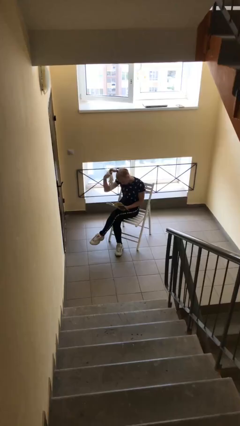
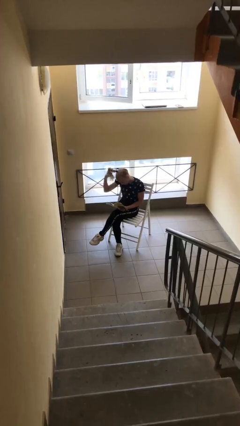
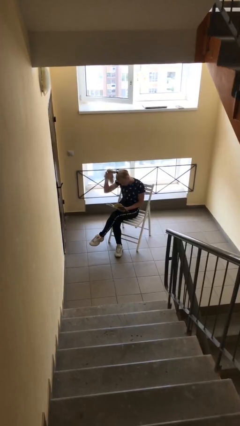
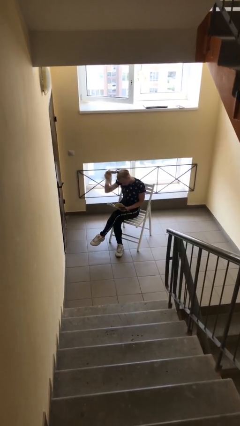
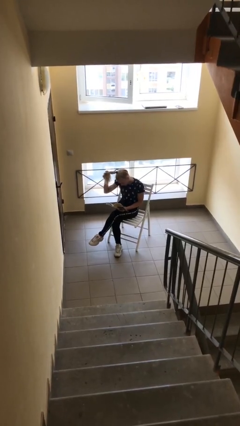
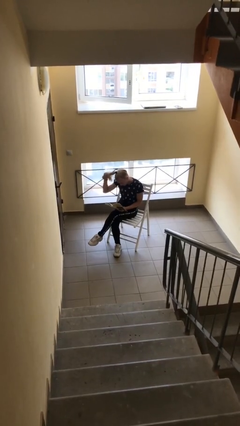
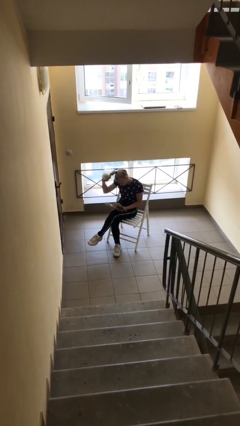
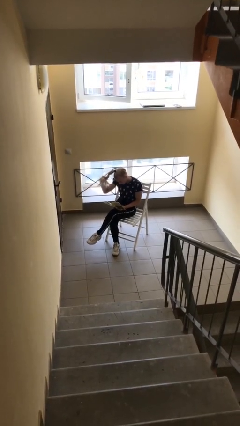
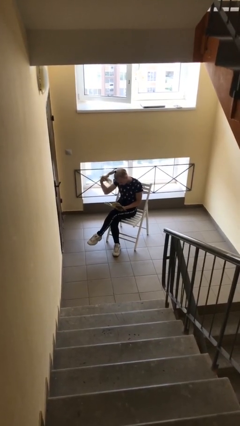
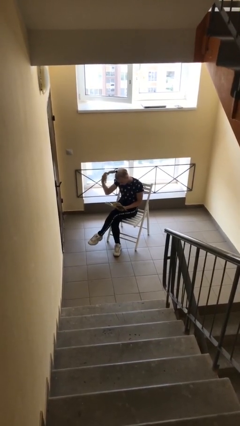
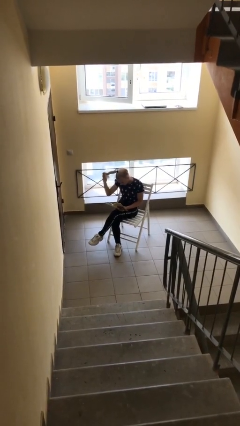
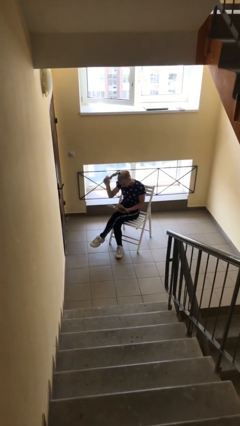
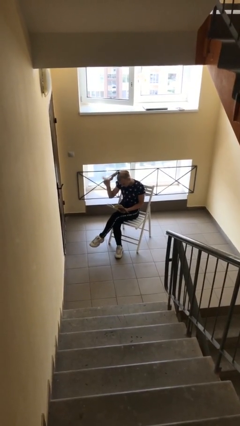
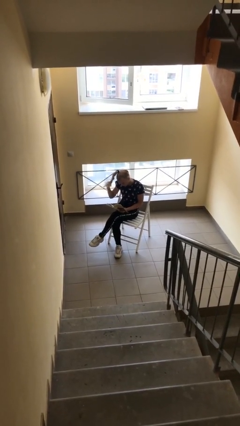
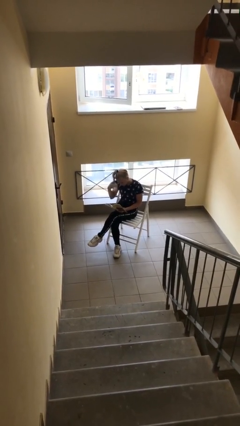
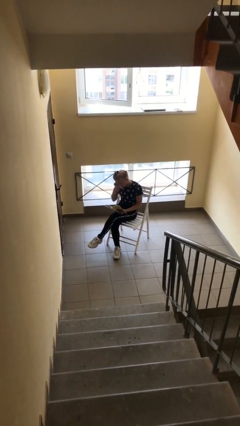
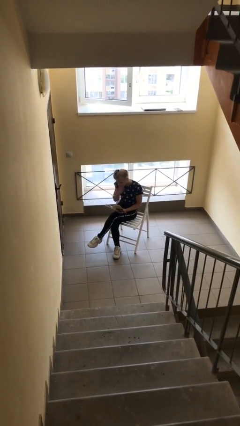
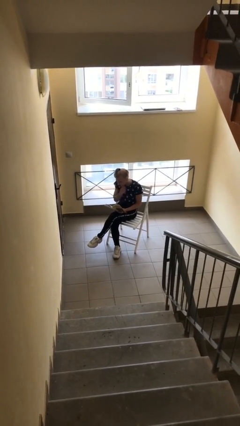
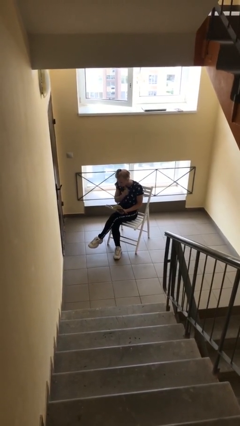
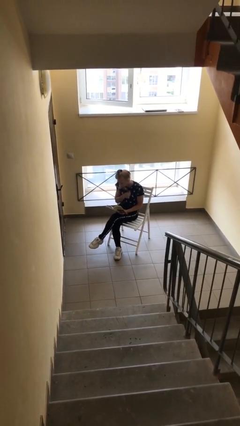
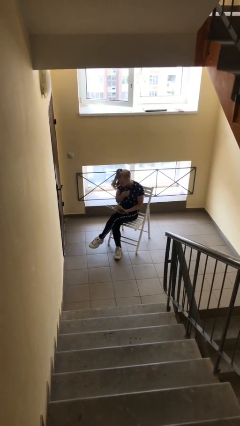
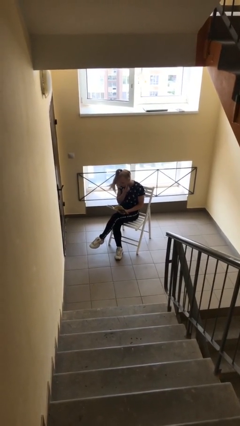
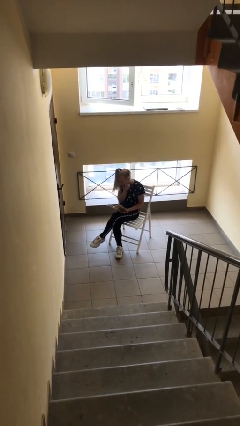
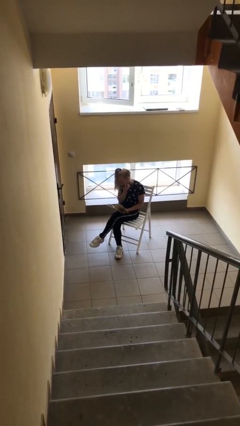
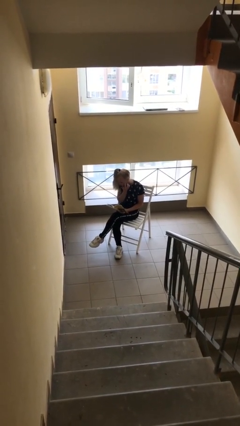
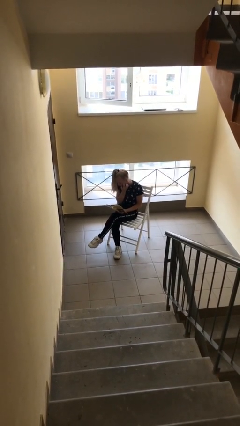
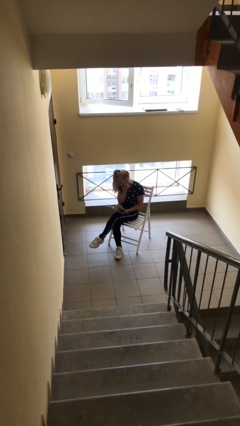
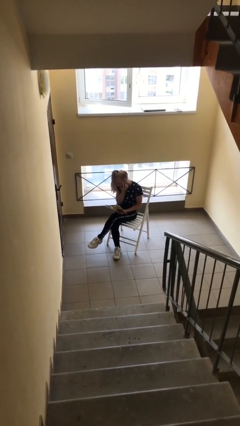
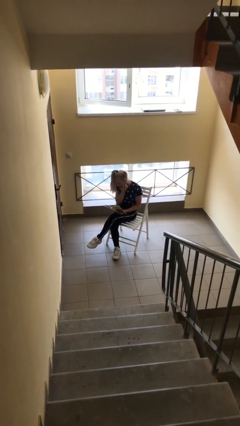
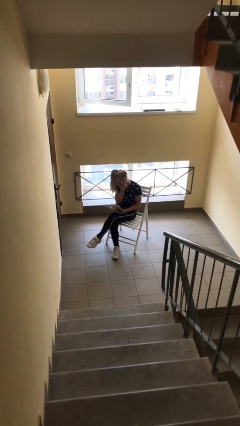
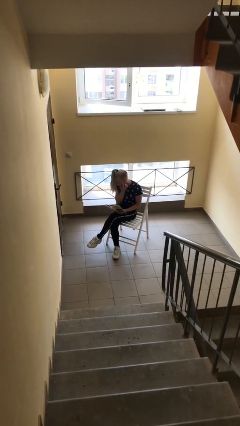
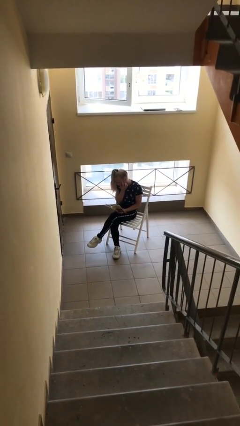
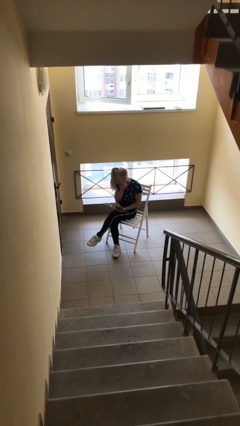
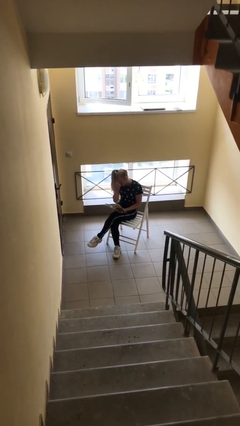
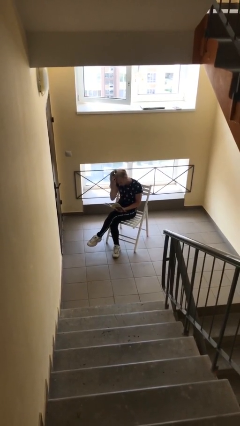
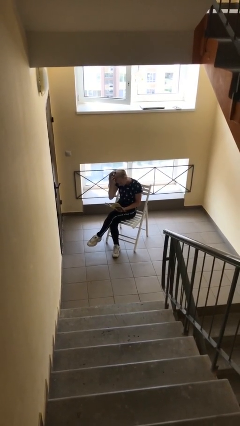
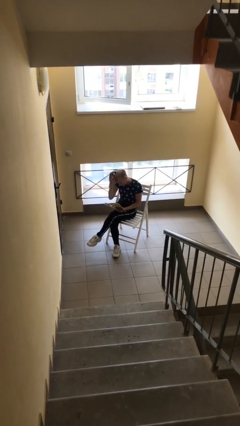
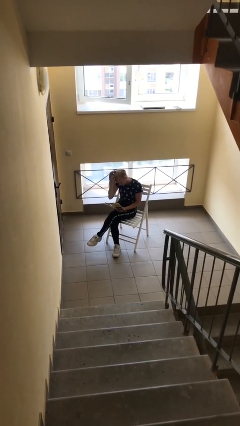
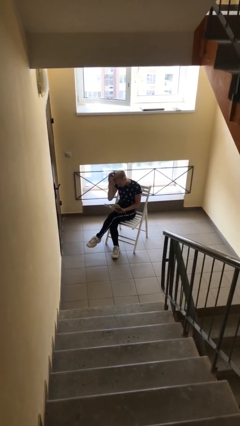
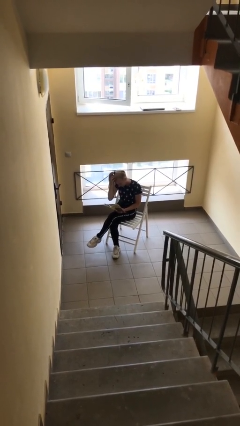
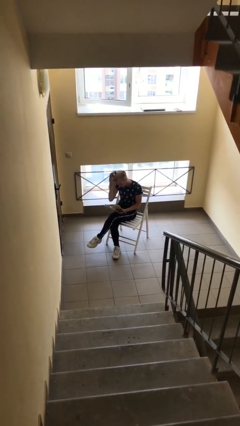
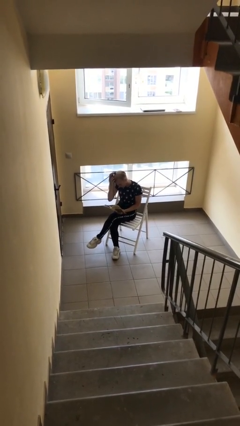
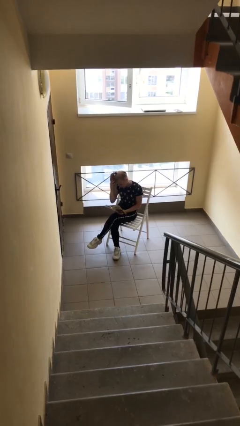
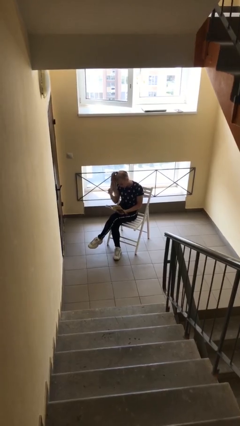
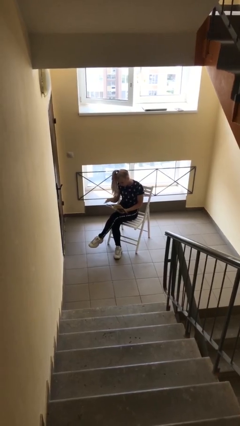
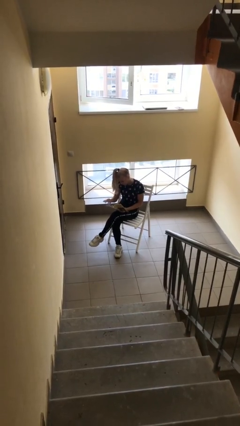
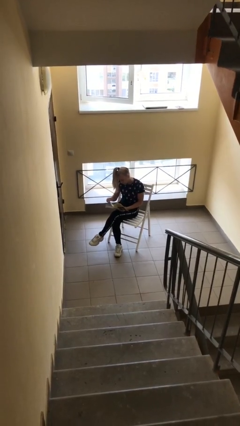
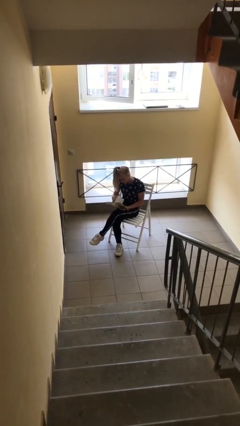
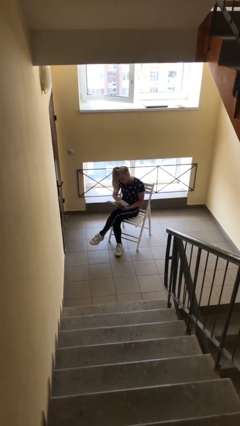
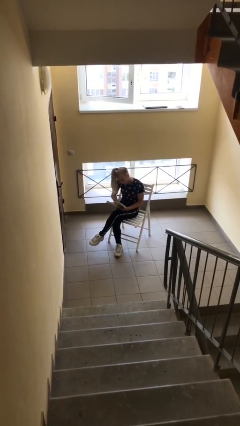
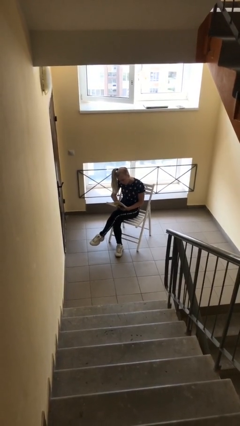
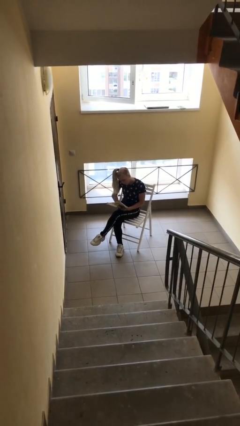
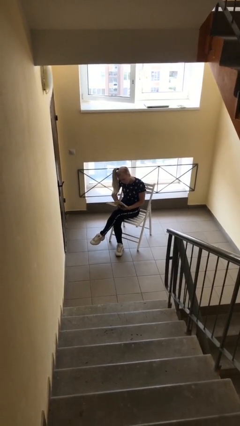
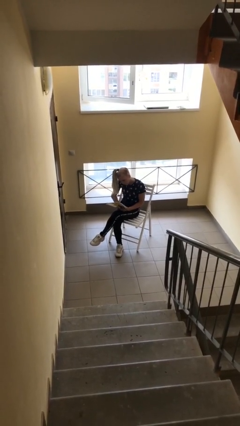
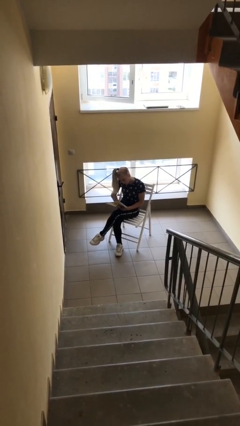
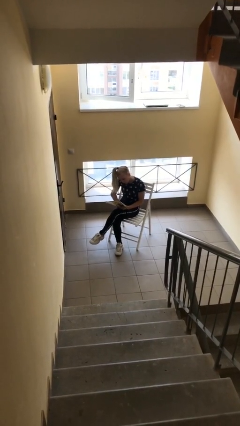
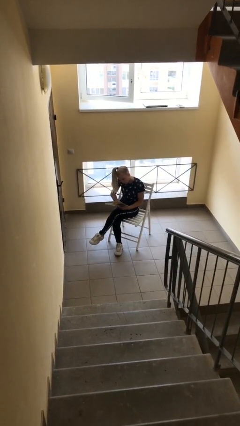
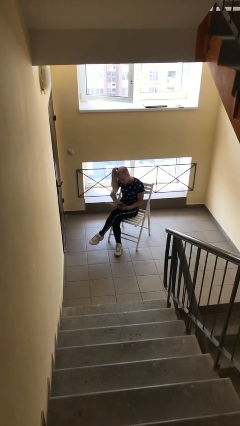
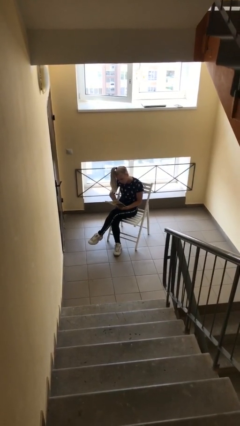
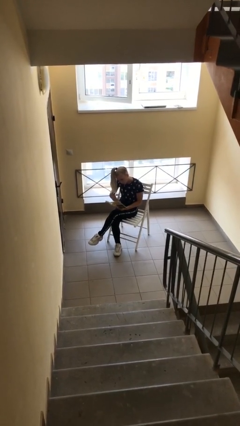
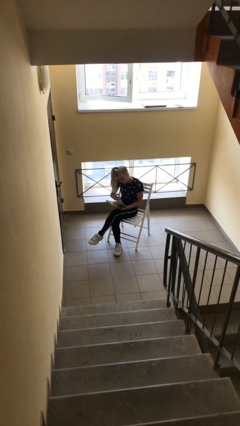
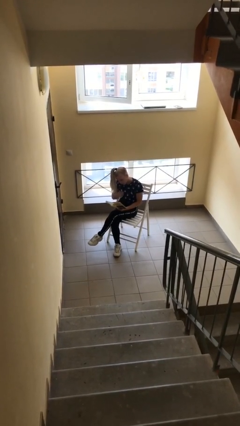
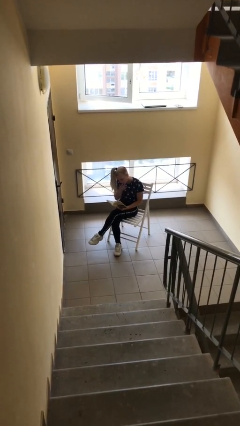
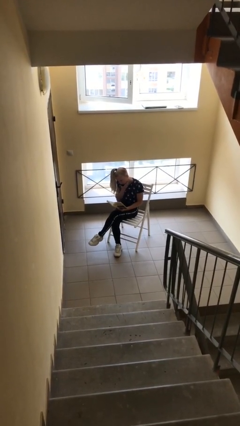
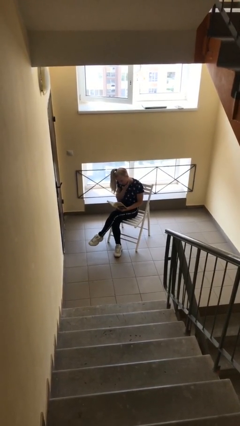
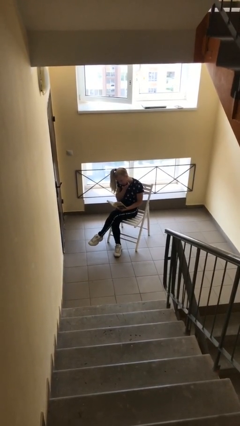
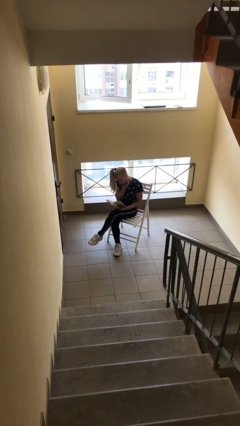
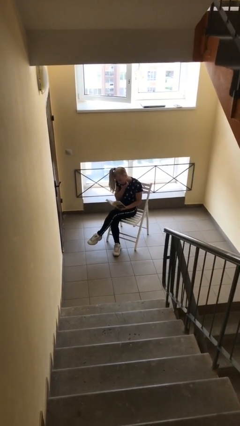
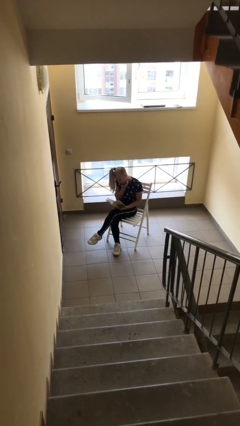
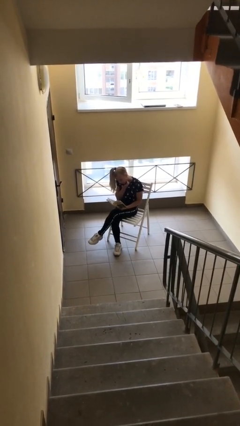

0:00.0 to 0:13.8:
person reads document

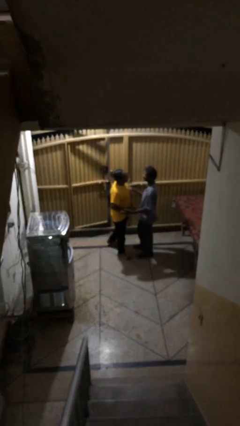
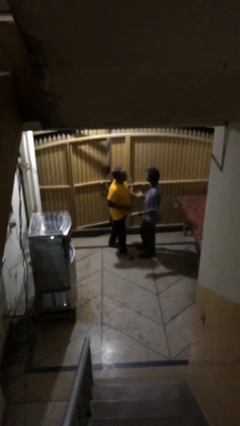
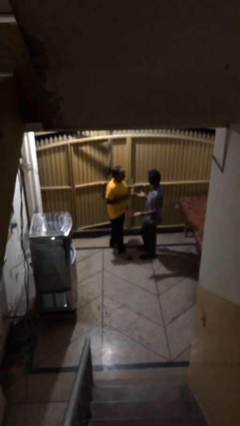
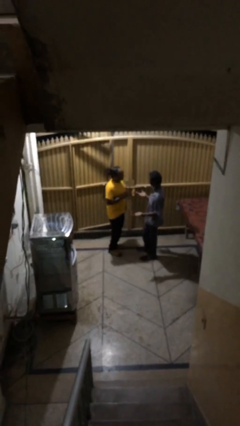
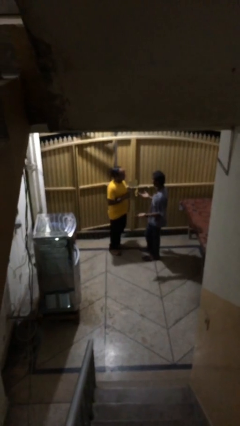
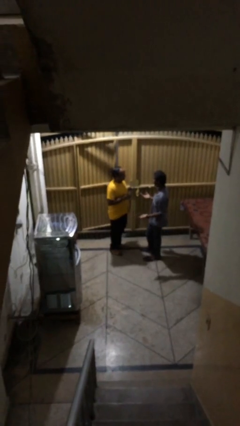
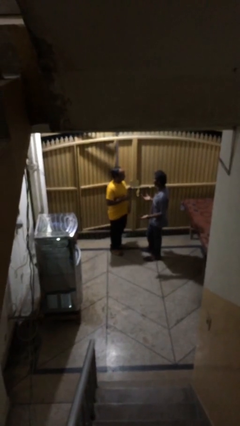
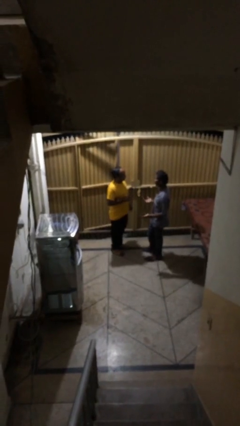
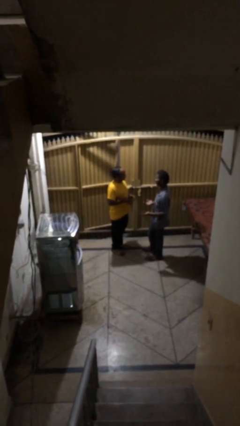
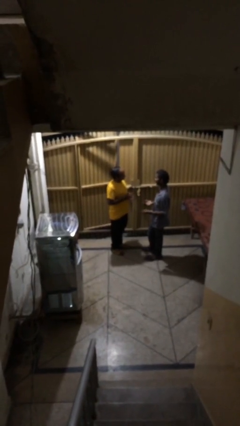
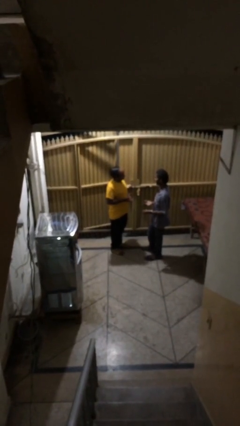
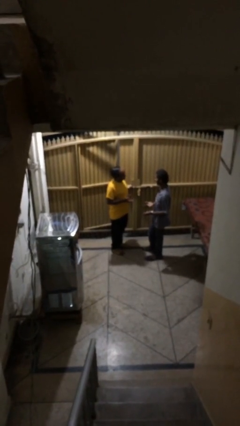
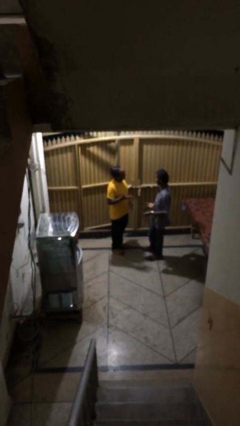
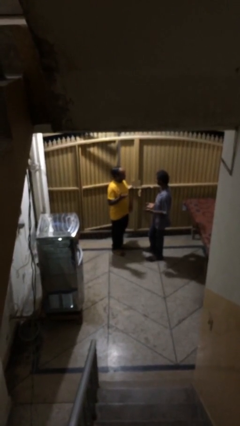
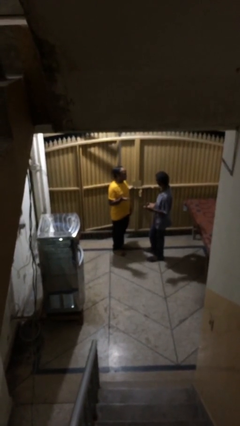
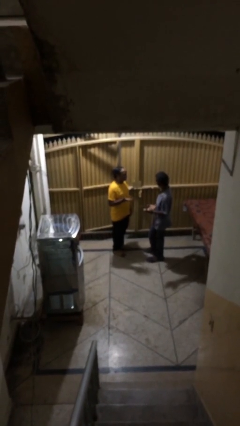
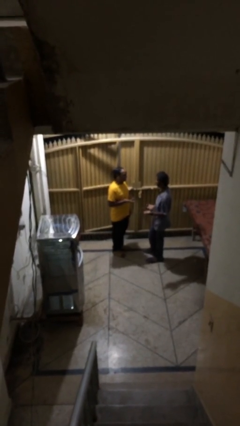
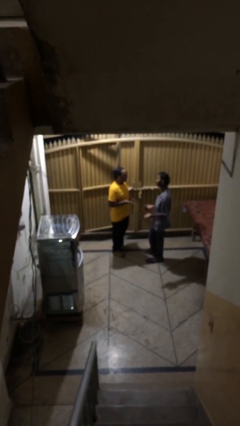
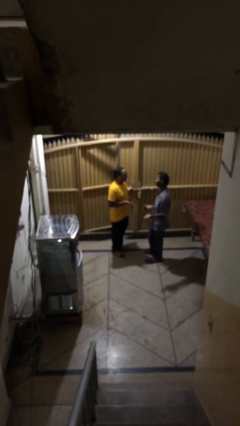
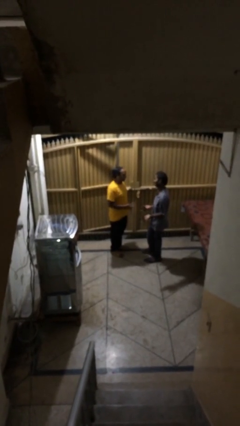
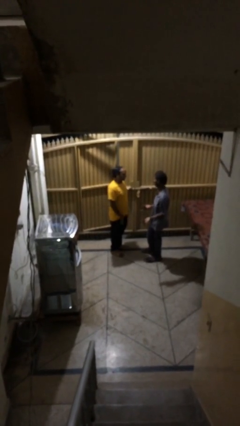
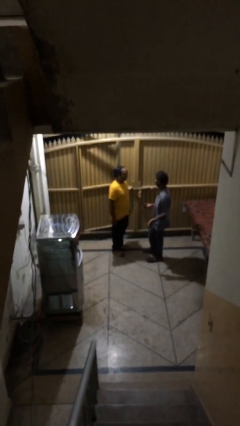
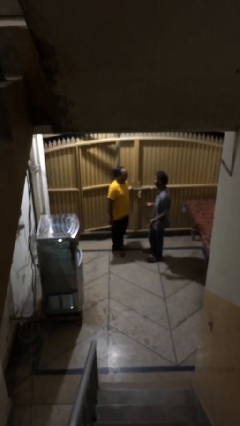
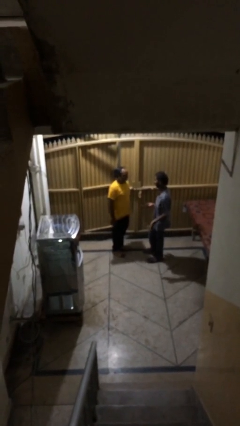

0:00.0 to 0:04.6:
person talks to person
